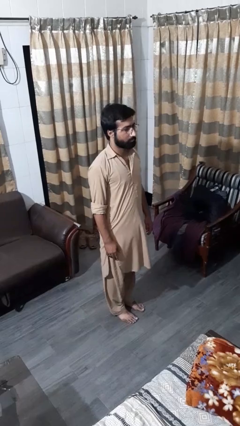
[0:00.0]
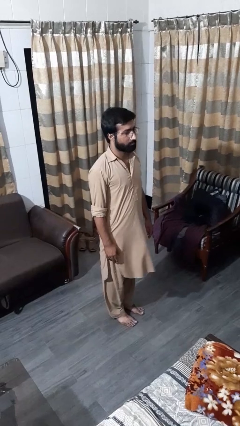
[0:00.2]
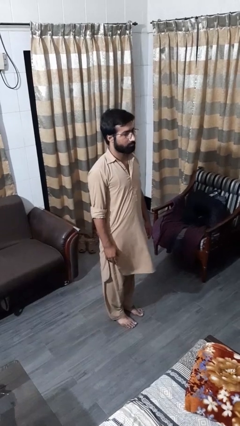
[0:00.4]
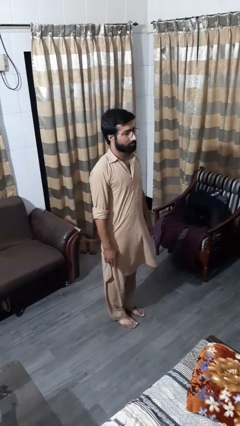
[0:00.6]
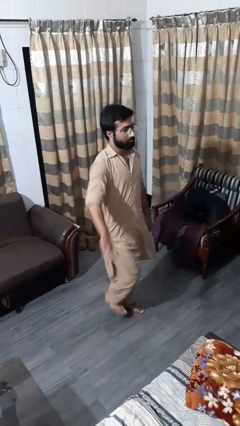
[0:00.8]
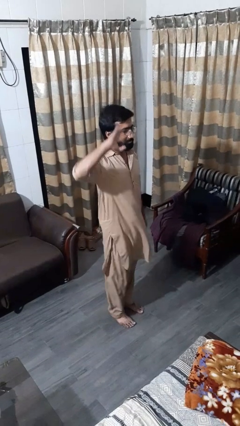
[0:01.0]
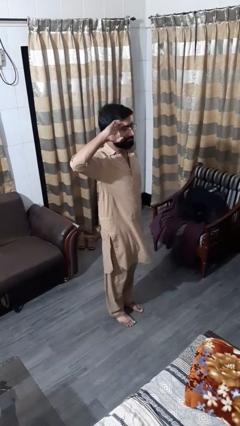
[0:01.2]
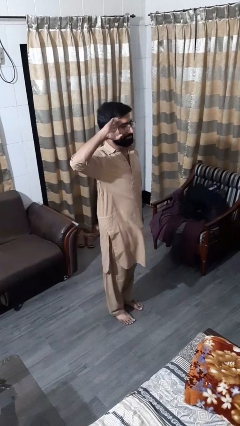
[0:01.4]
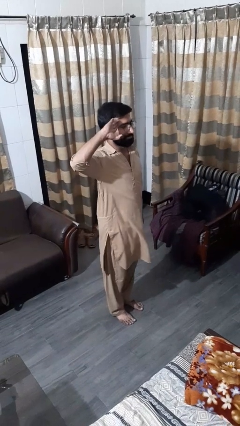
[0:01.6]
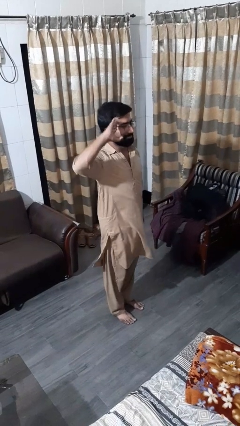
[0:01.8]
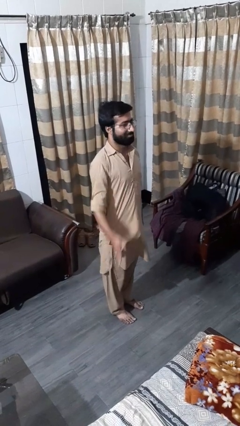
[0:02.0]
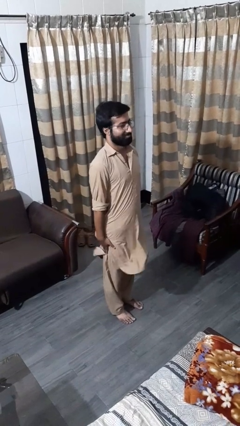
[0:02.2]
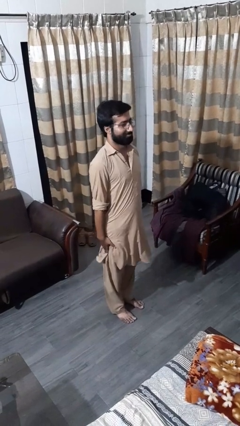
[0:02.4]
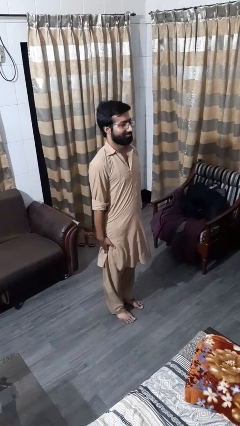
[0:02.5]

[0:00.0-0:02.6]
person salutes

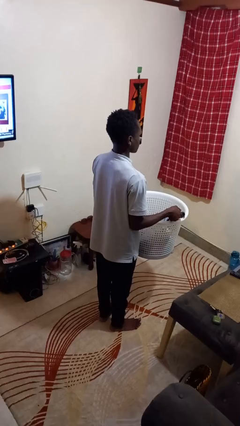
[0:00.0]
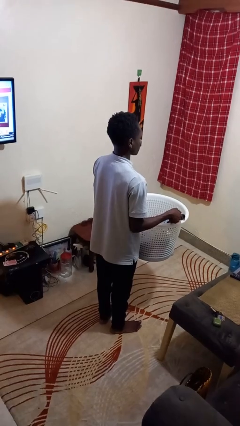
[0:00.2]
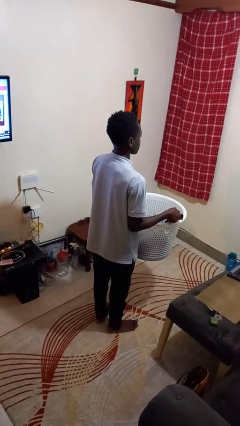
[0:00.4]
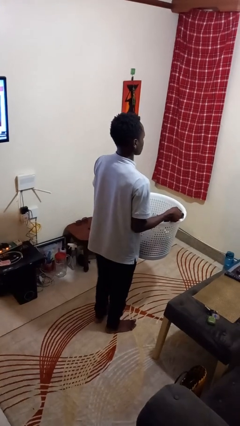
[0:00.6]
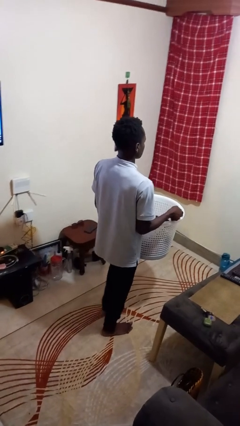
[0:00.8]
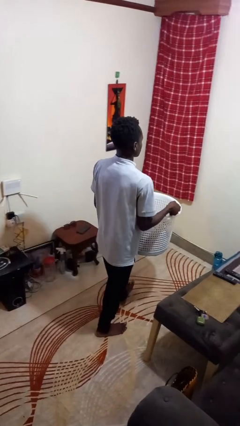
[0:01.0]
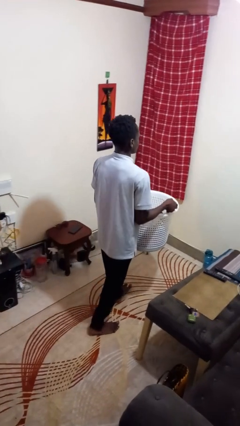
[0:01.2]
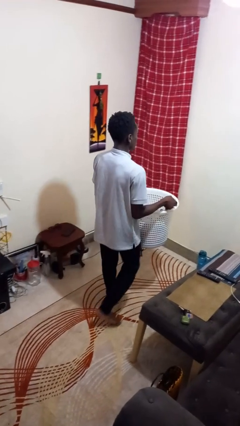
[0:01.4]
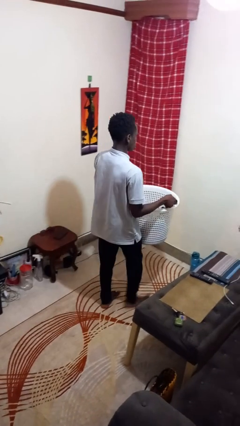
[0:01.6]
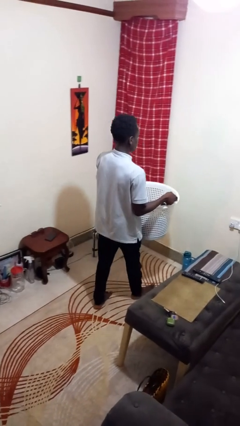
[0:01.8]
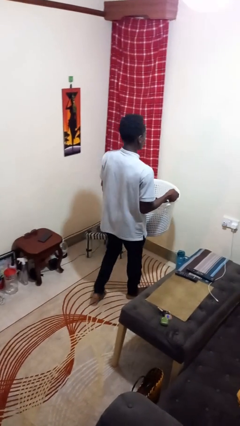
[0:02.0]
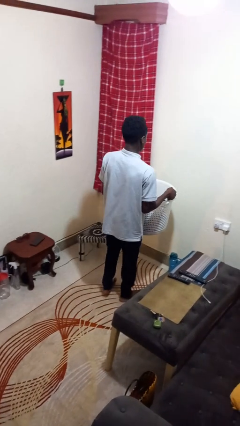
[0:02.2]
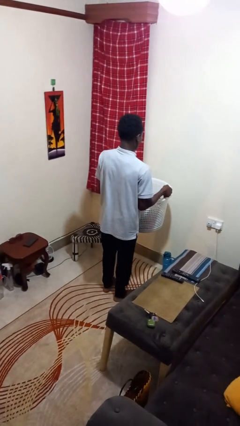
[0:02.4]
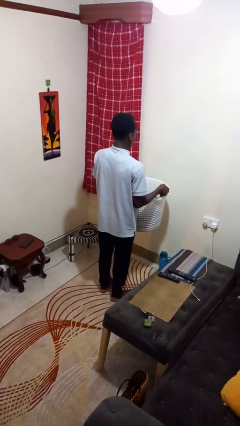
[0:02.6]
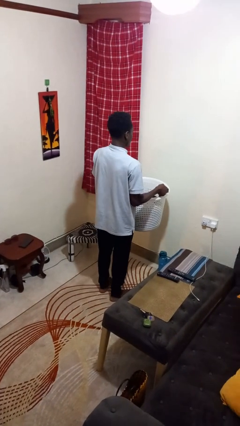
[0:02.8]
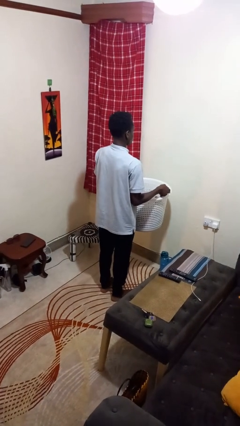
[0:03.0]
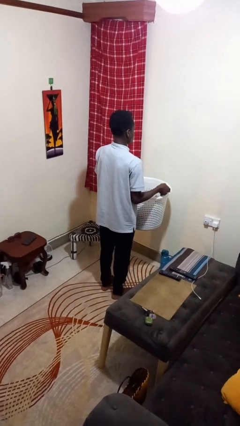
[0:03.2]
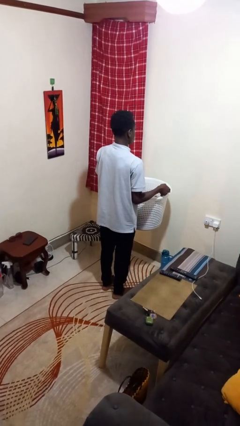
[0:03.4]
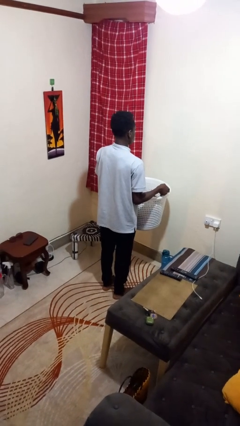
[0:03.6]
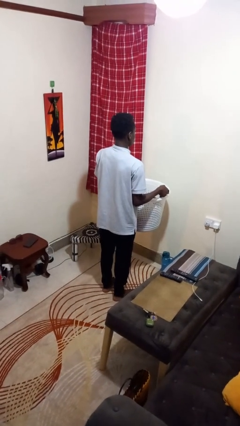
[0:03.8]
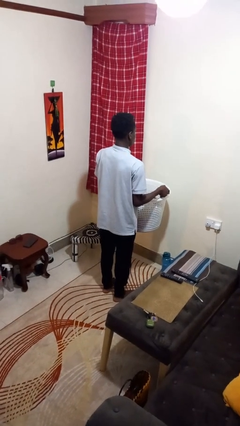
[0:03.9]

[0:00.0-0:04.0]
person carries laundry basket

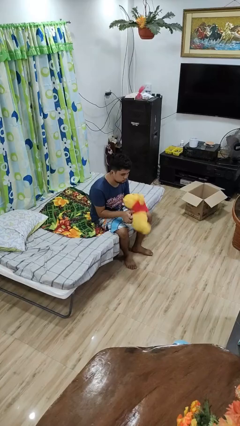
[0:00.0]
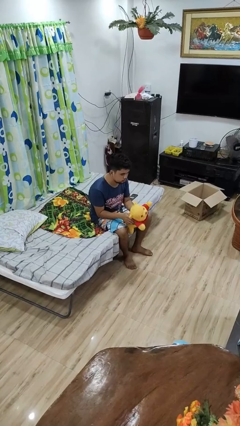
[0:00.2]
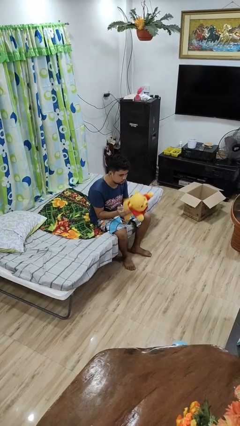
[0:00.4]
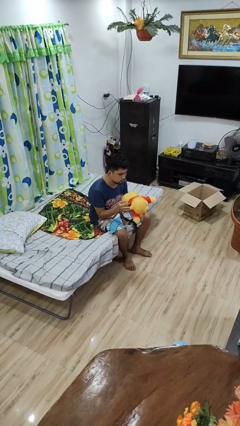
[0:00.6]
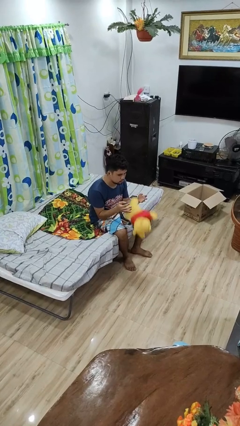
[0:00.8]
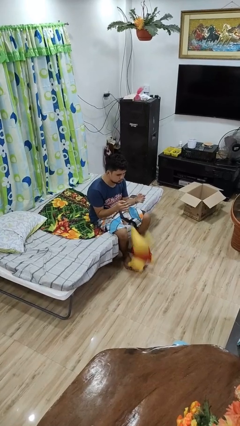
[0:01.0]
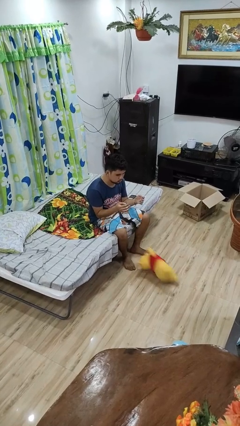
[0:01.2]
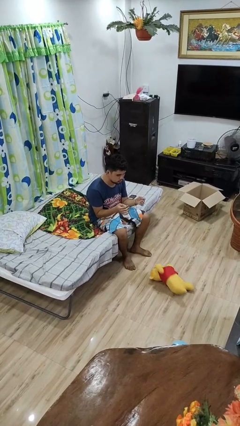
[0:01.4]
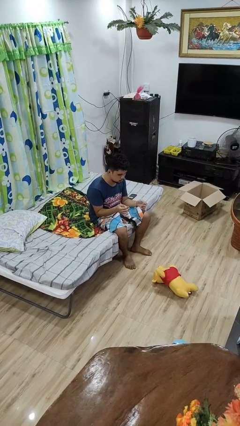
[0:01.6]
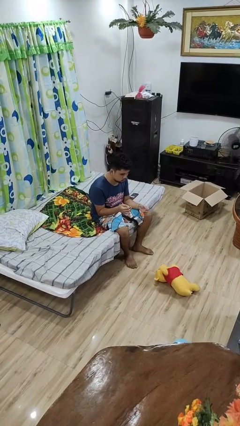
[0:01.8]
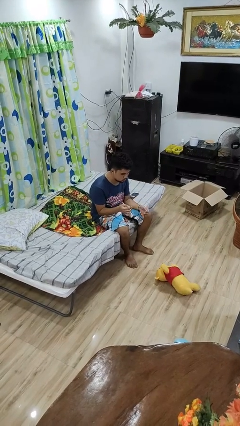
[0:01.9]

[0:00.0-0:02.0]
person drops object

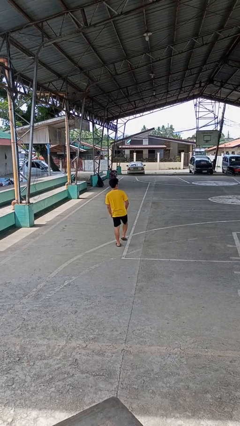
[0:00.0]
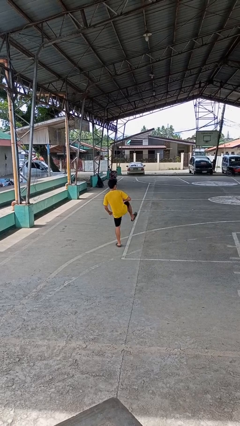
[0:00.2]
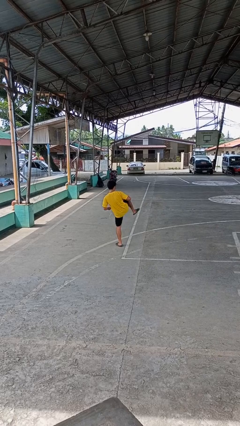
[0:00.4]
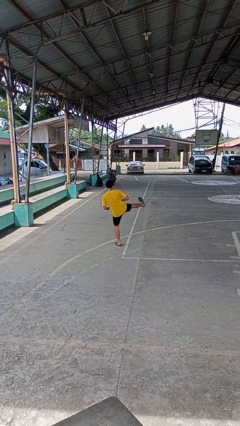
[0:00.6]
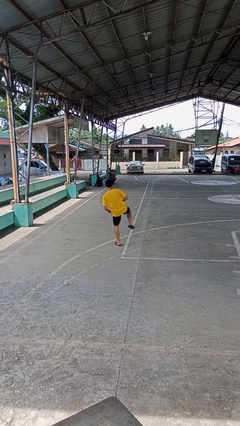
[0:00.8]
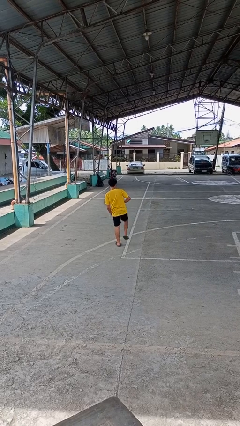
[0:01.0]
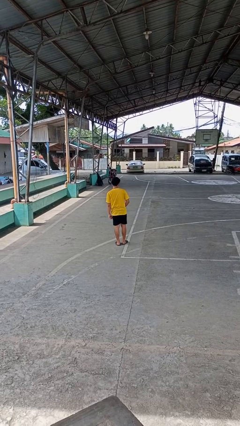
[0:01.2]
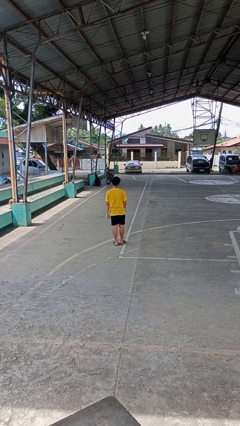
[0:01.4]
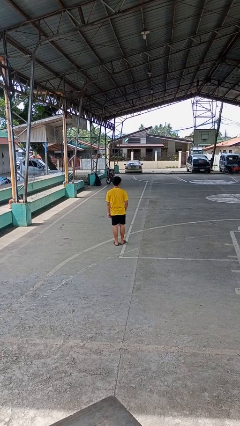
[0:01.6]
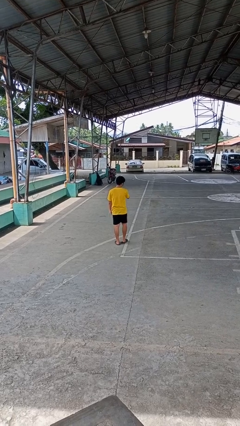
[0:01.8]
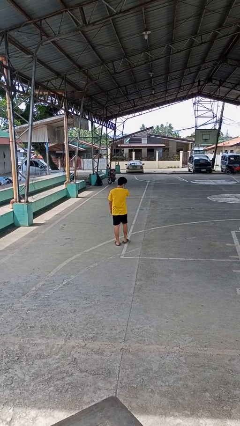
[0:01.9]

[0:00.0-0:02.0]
person karate kicks

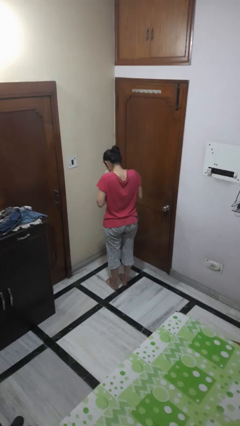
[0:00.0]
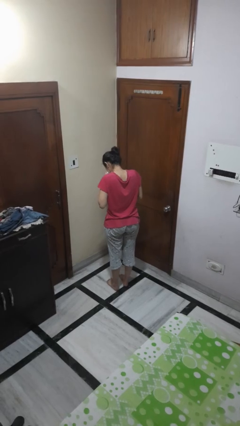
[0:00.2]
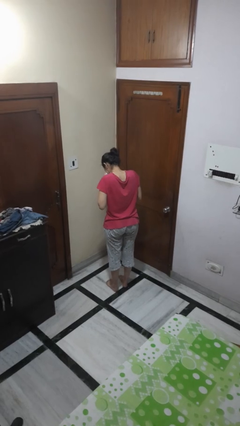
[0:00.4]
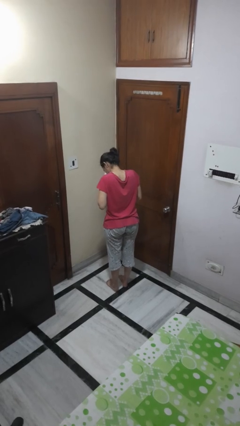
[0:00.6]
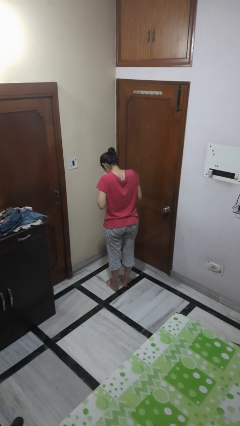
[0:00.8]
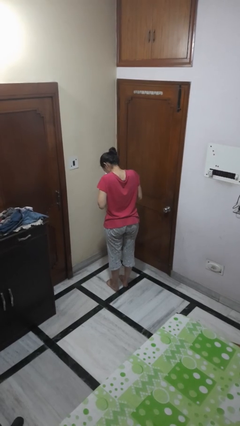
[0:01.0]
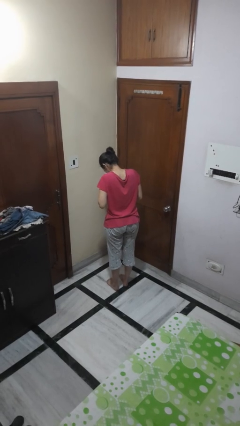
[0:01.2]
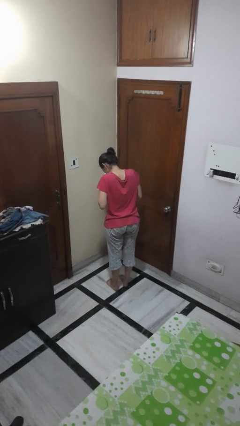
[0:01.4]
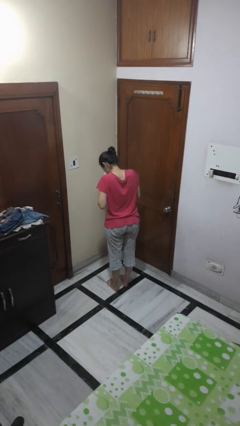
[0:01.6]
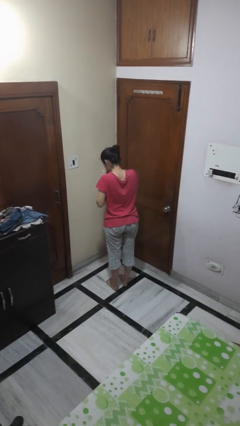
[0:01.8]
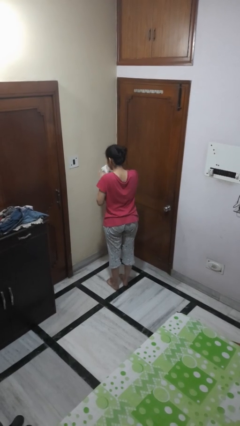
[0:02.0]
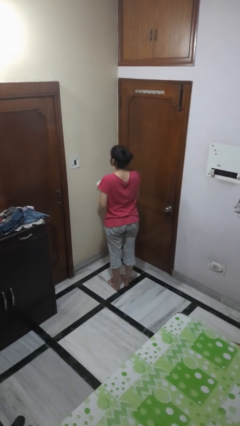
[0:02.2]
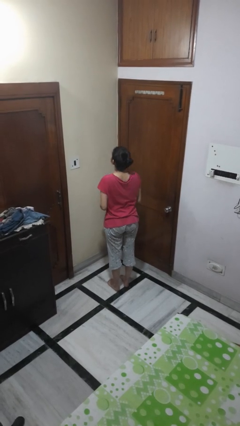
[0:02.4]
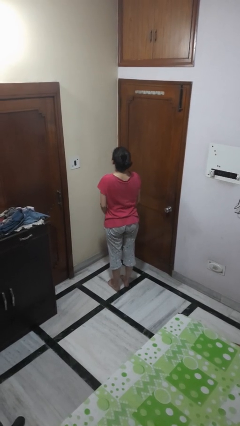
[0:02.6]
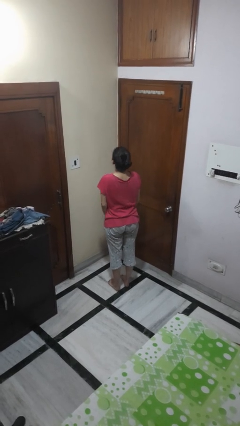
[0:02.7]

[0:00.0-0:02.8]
person blows nose

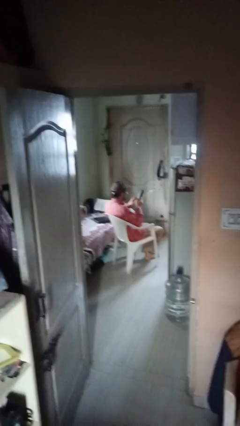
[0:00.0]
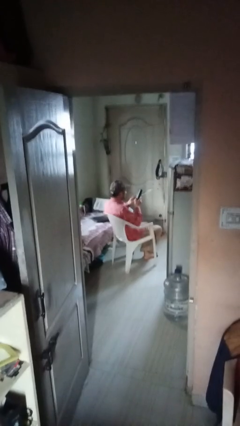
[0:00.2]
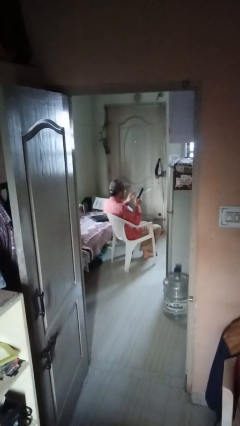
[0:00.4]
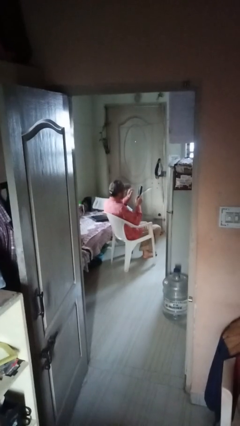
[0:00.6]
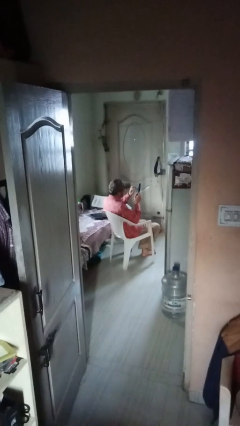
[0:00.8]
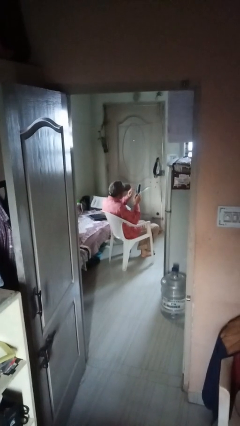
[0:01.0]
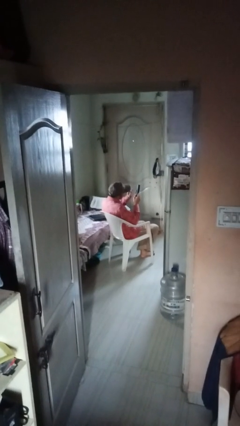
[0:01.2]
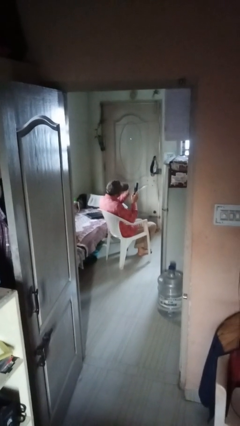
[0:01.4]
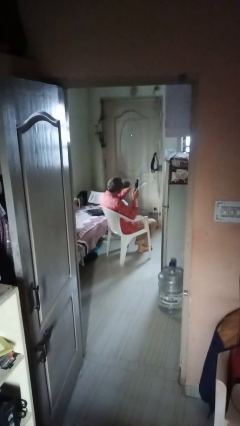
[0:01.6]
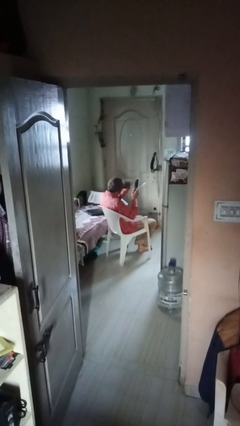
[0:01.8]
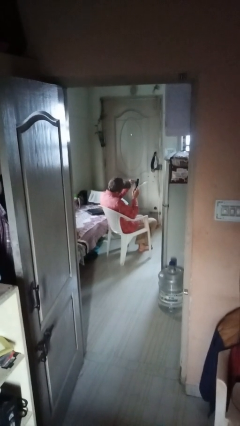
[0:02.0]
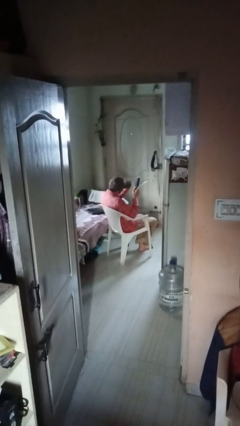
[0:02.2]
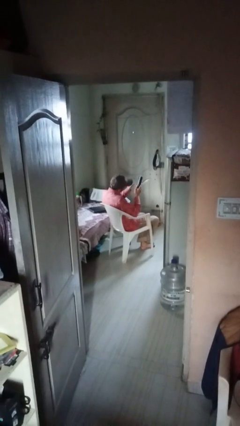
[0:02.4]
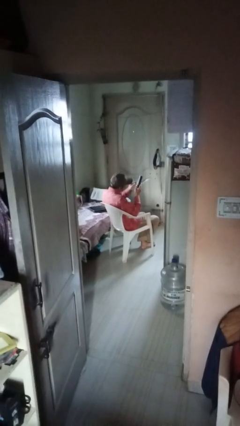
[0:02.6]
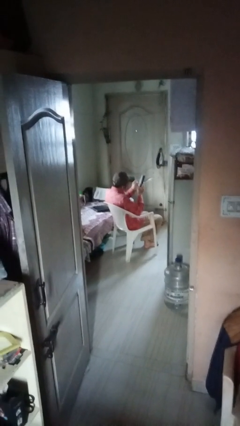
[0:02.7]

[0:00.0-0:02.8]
person taps object with finger

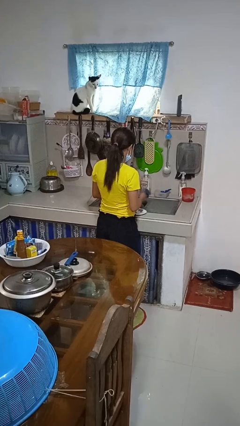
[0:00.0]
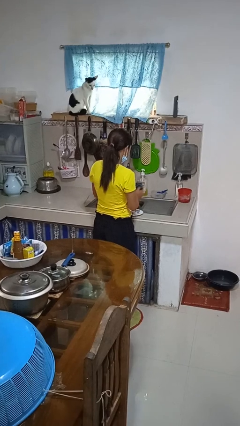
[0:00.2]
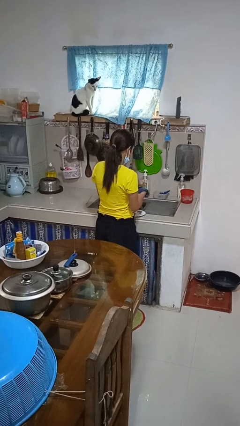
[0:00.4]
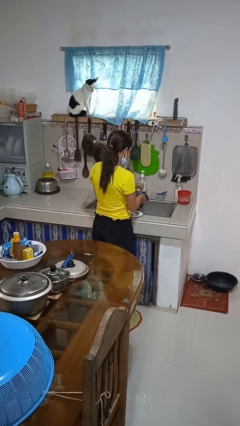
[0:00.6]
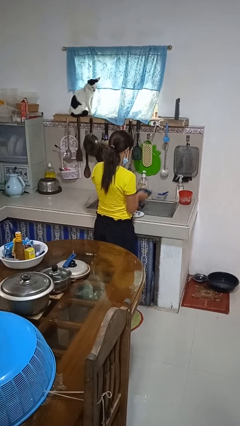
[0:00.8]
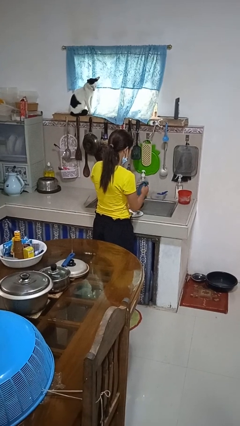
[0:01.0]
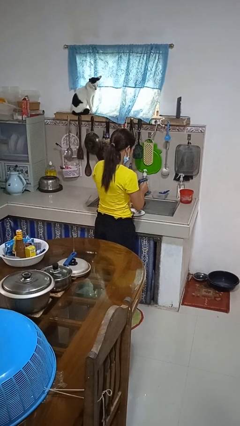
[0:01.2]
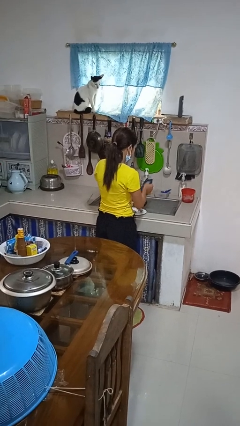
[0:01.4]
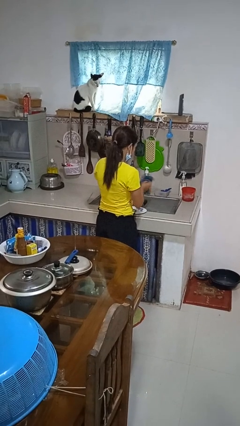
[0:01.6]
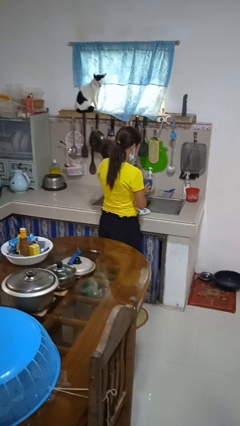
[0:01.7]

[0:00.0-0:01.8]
person dries dish
